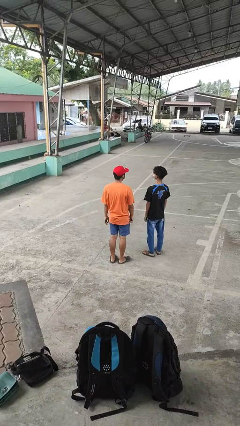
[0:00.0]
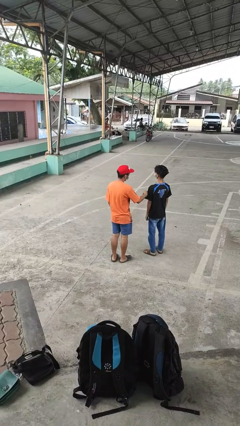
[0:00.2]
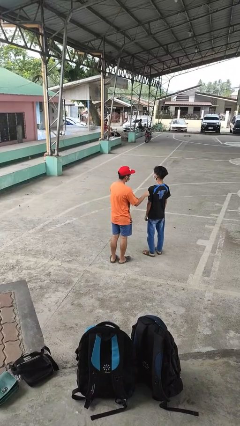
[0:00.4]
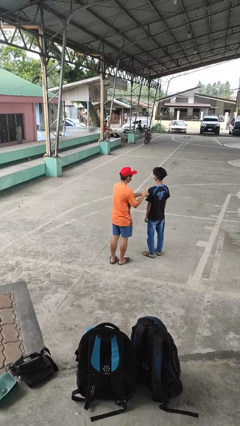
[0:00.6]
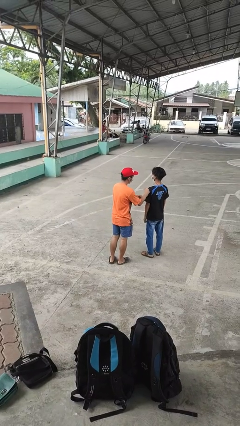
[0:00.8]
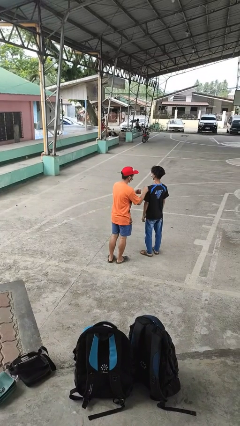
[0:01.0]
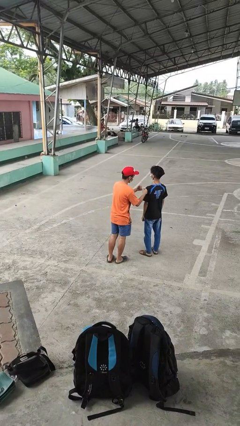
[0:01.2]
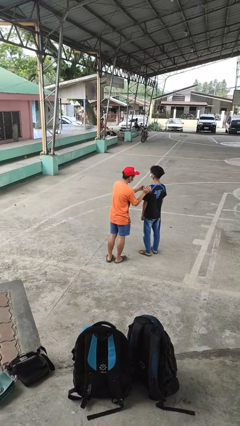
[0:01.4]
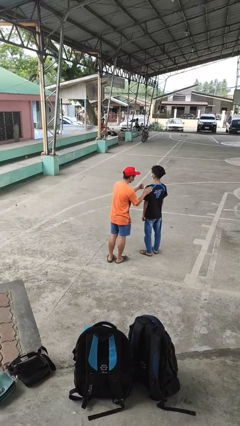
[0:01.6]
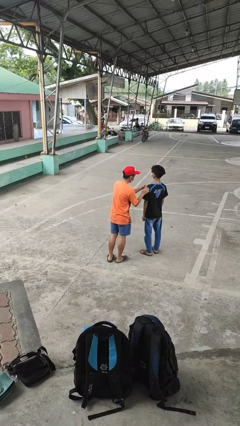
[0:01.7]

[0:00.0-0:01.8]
person pounds shoulders of person

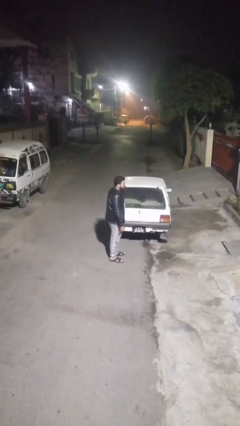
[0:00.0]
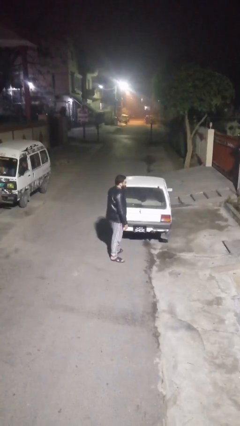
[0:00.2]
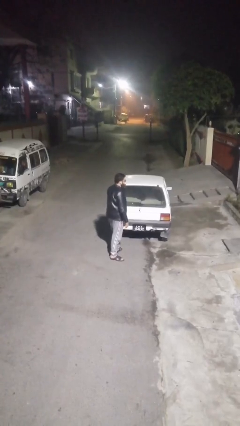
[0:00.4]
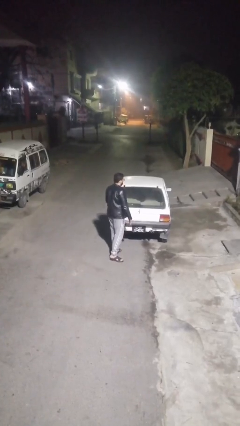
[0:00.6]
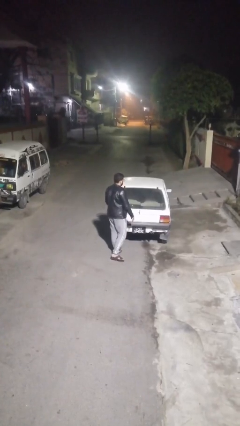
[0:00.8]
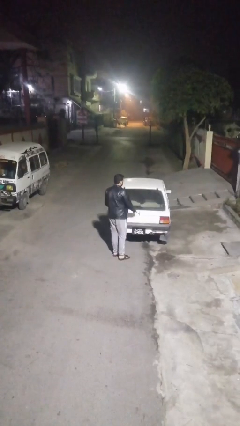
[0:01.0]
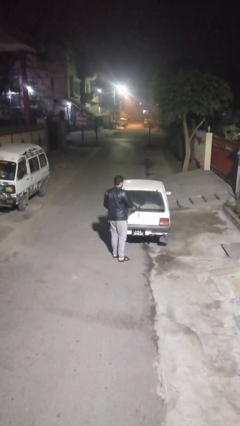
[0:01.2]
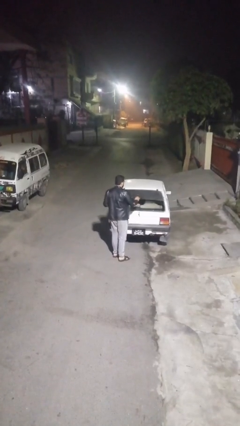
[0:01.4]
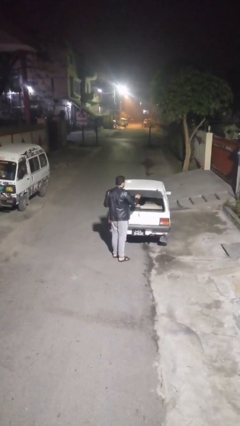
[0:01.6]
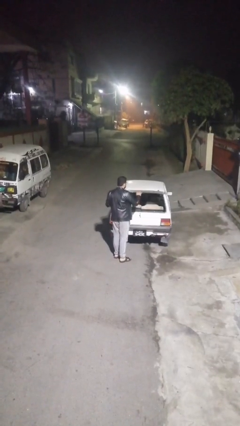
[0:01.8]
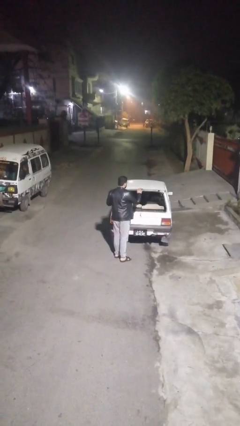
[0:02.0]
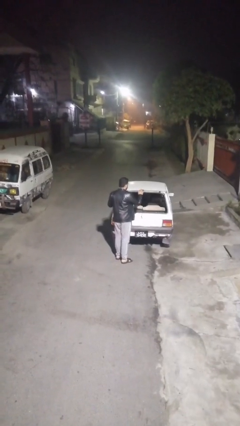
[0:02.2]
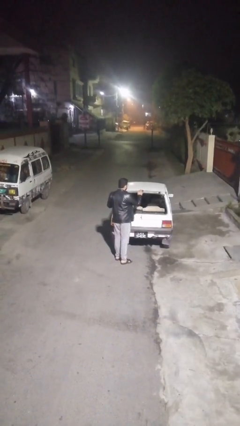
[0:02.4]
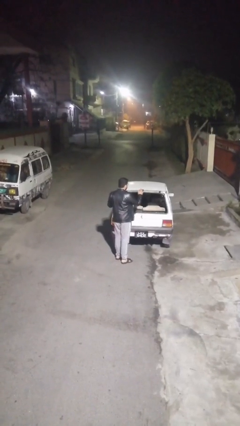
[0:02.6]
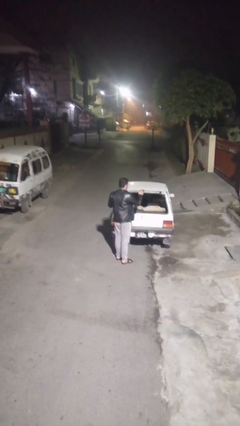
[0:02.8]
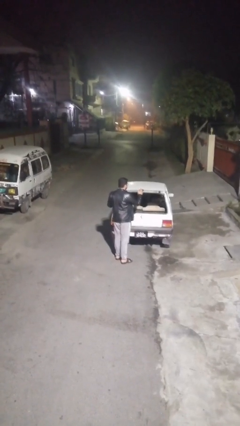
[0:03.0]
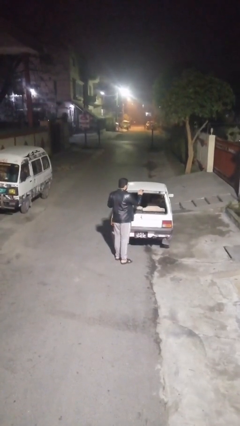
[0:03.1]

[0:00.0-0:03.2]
person opens car trunk

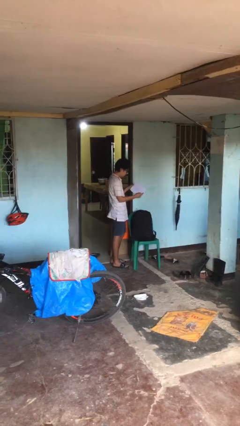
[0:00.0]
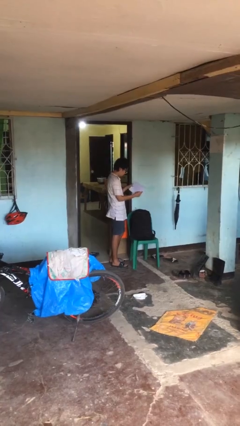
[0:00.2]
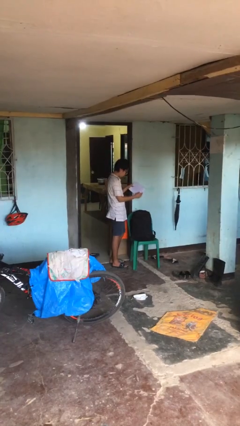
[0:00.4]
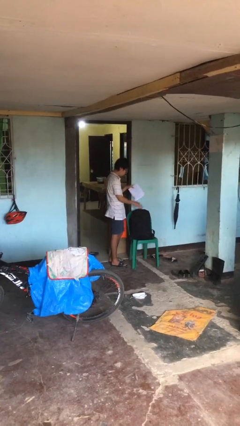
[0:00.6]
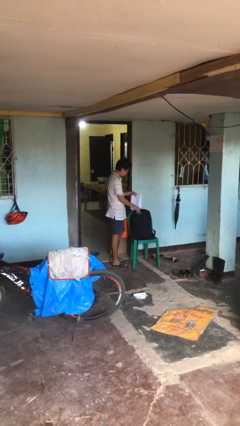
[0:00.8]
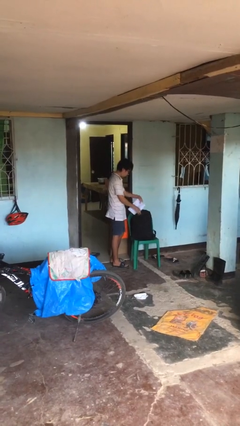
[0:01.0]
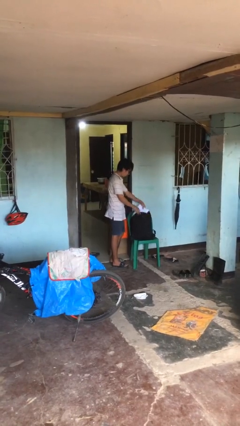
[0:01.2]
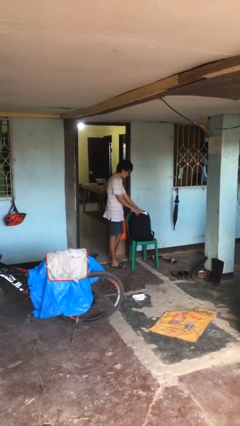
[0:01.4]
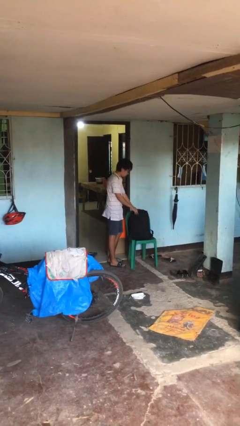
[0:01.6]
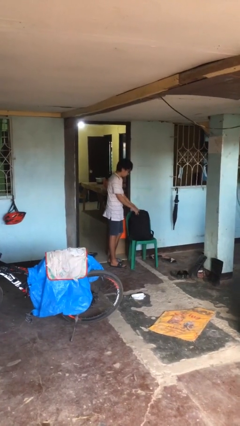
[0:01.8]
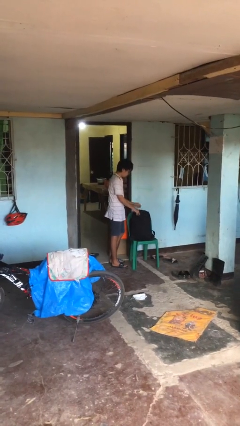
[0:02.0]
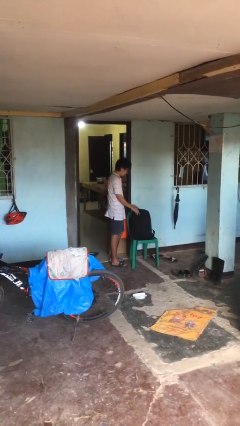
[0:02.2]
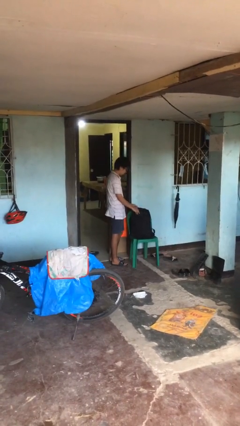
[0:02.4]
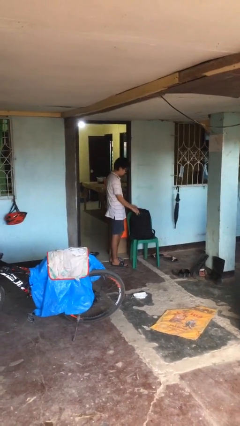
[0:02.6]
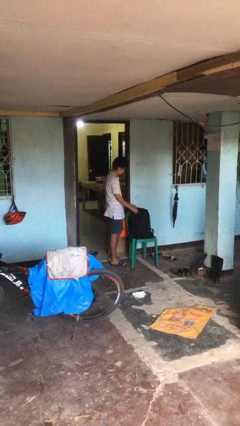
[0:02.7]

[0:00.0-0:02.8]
person puts object into backpack

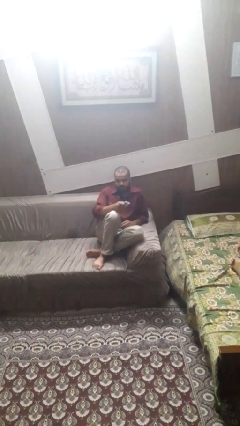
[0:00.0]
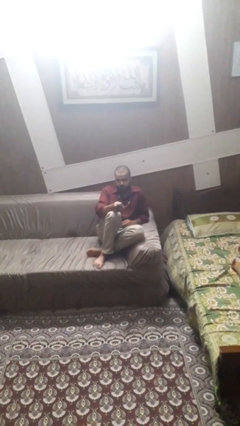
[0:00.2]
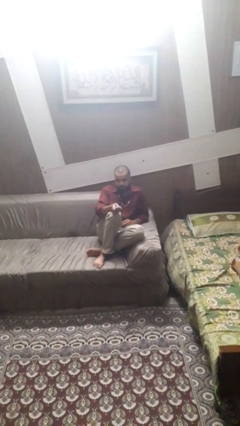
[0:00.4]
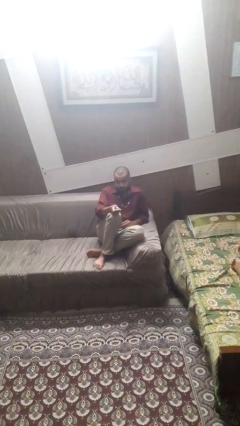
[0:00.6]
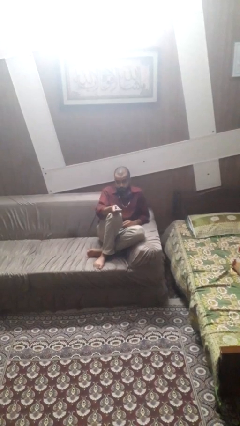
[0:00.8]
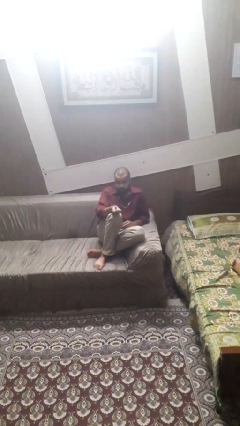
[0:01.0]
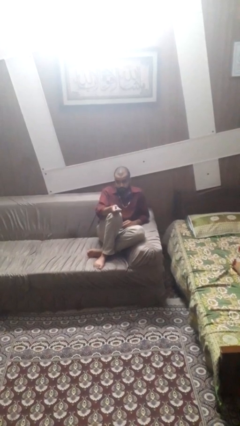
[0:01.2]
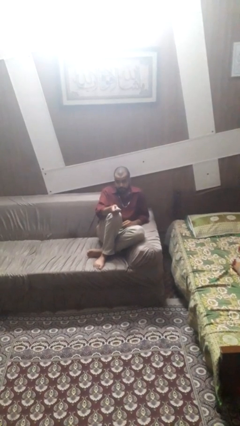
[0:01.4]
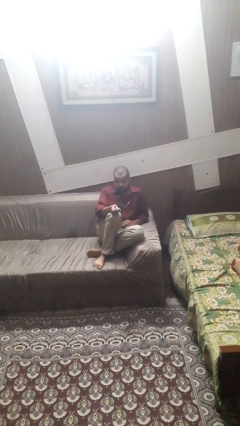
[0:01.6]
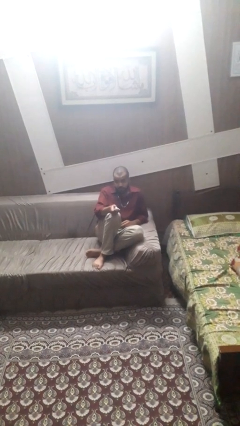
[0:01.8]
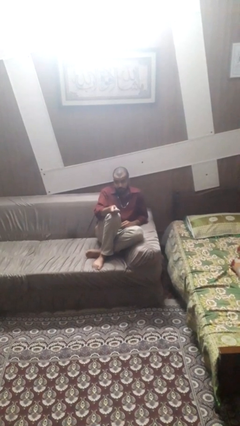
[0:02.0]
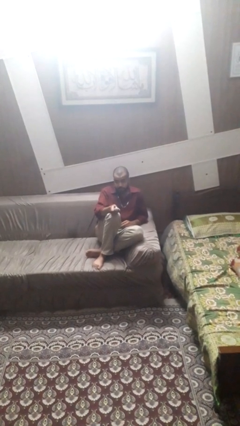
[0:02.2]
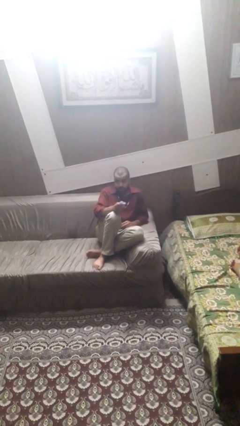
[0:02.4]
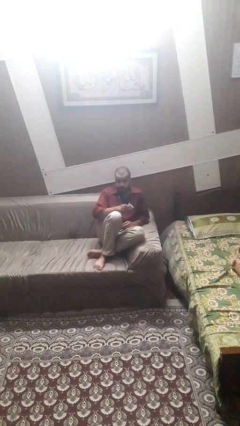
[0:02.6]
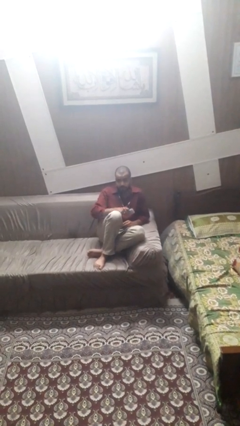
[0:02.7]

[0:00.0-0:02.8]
person uses television remote

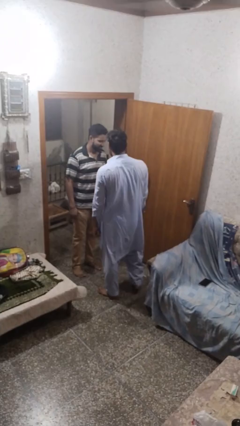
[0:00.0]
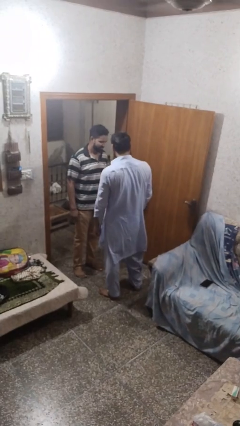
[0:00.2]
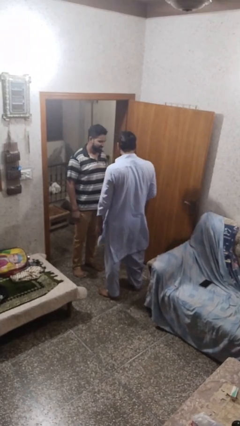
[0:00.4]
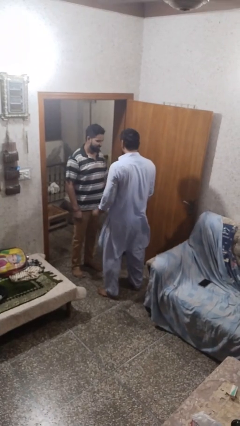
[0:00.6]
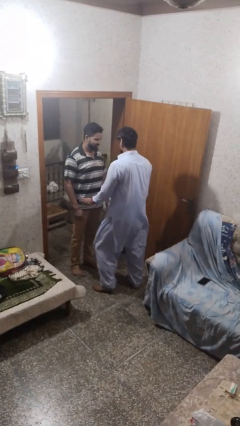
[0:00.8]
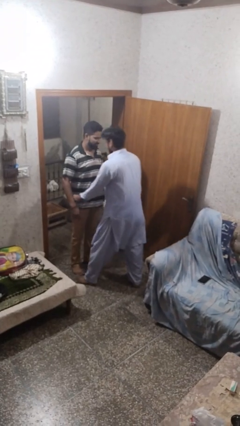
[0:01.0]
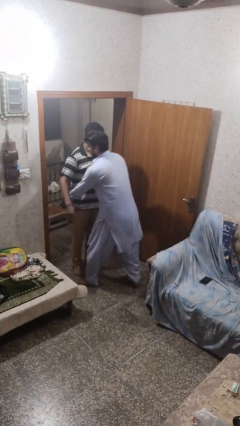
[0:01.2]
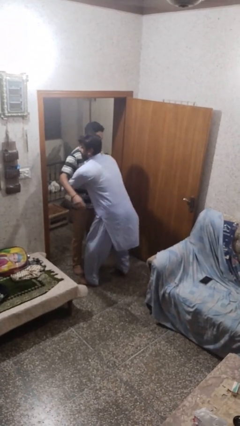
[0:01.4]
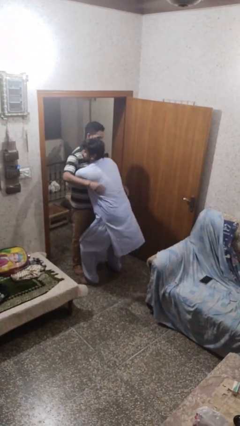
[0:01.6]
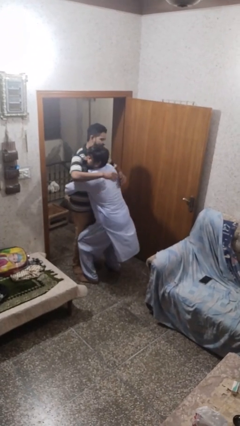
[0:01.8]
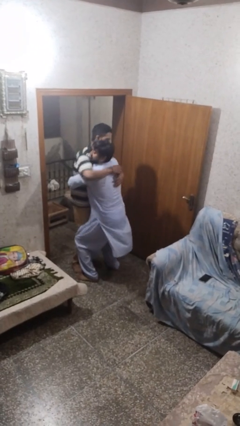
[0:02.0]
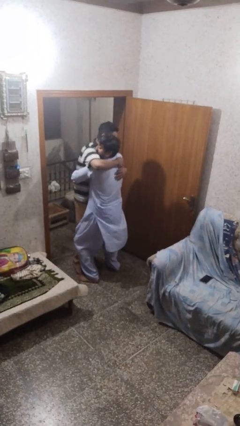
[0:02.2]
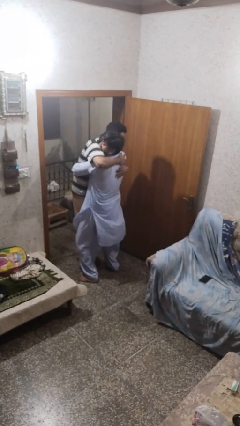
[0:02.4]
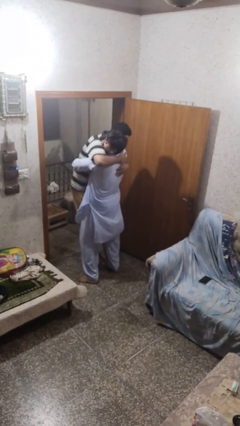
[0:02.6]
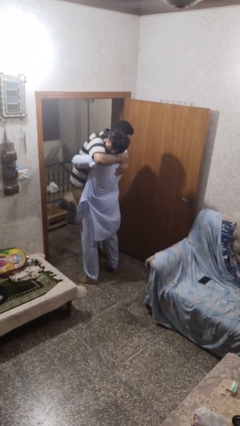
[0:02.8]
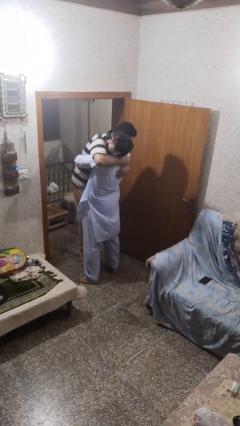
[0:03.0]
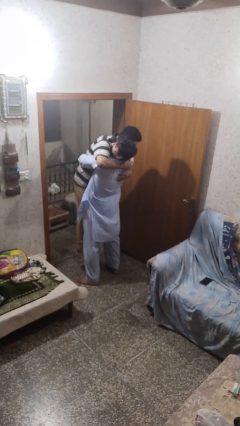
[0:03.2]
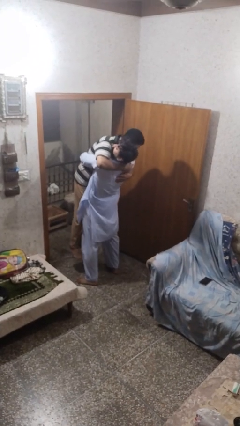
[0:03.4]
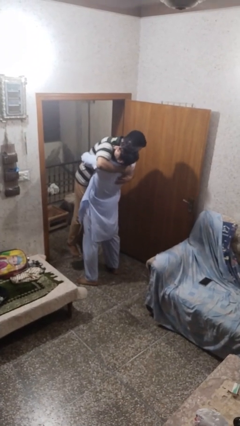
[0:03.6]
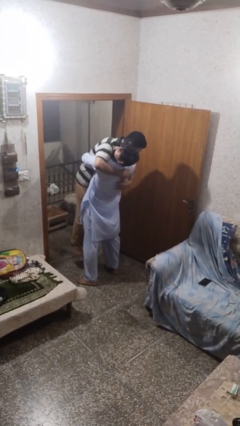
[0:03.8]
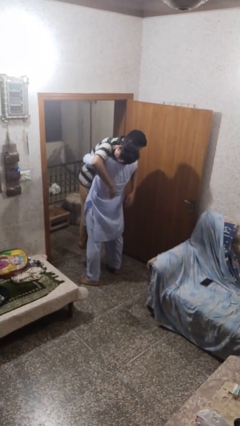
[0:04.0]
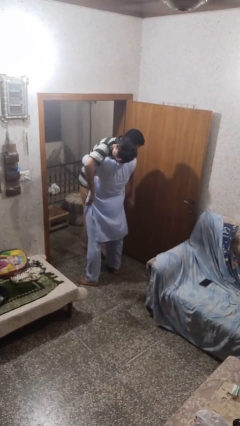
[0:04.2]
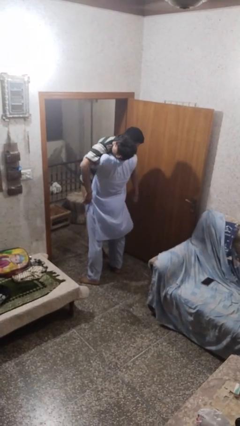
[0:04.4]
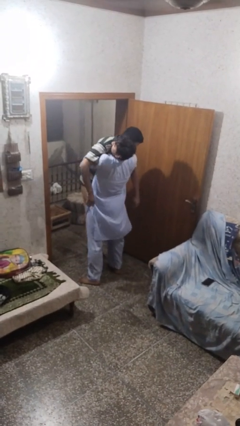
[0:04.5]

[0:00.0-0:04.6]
person picks up person

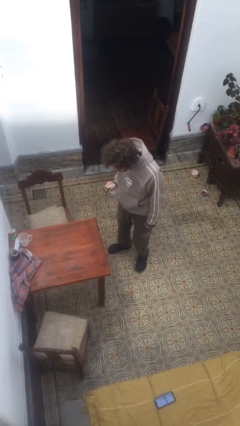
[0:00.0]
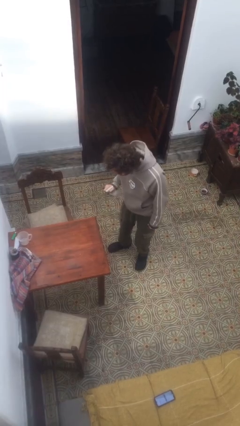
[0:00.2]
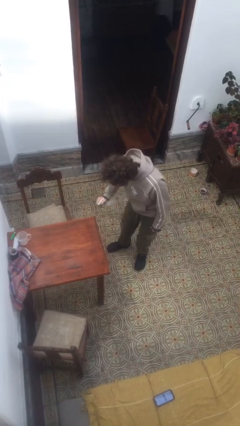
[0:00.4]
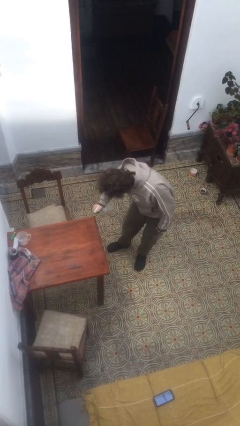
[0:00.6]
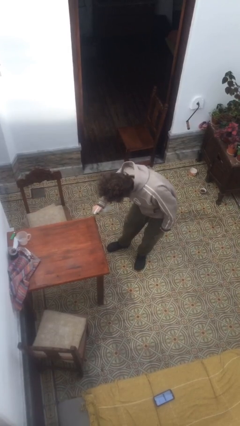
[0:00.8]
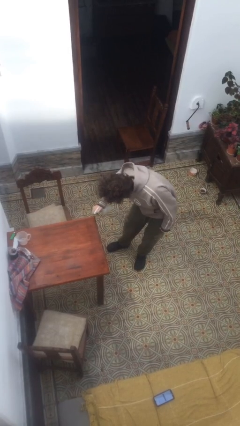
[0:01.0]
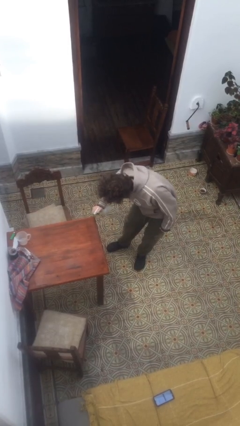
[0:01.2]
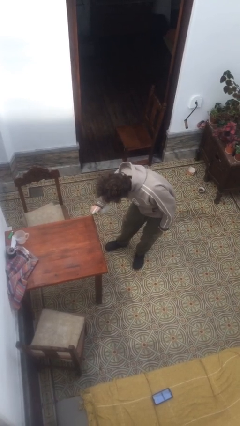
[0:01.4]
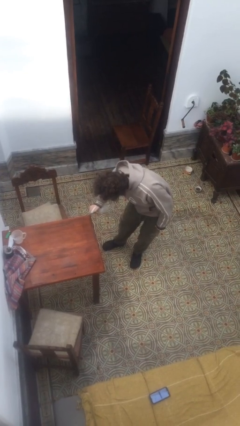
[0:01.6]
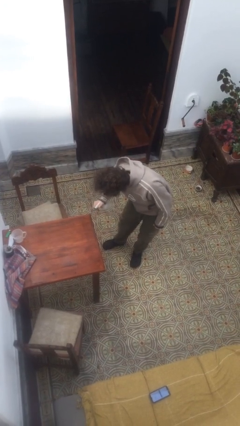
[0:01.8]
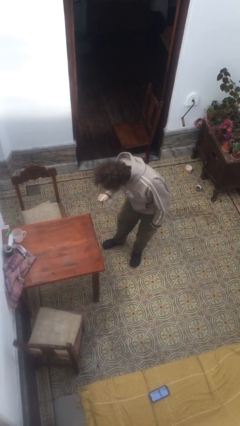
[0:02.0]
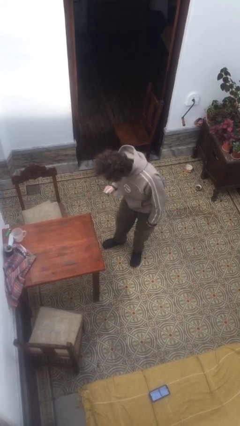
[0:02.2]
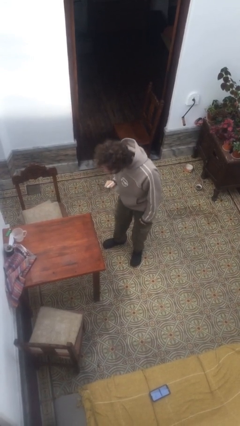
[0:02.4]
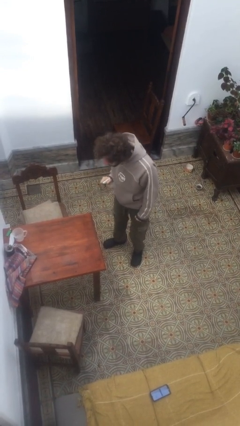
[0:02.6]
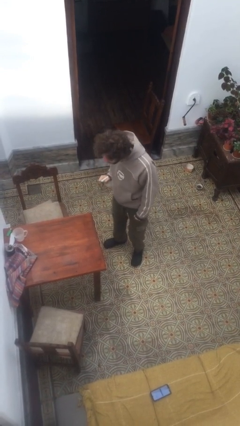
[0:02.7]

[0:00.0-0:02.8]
person sprays from bottle
